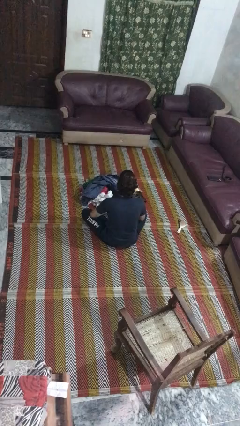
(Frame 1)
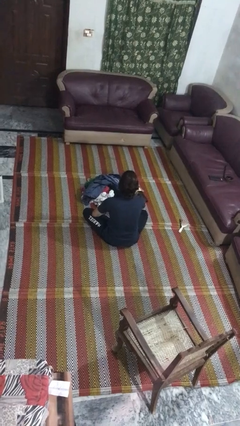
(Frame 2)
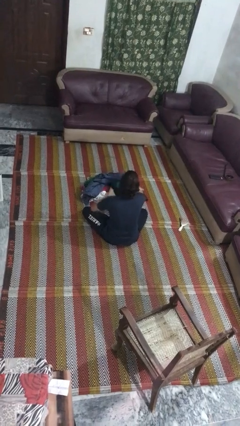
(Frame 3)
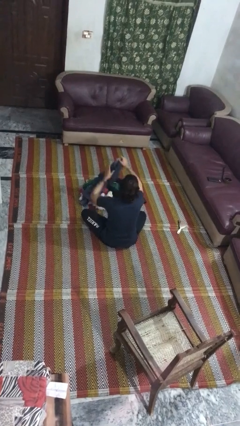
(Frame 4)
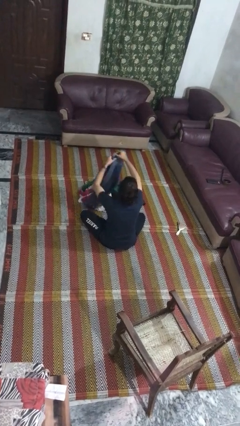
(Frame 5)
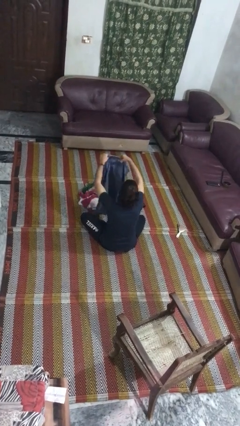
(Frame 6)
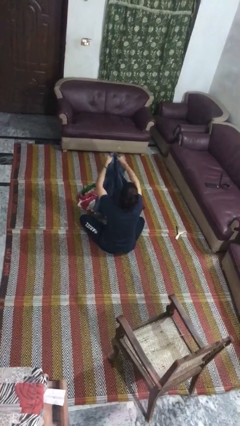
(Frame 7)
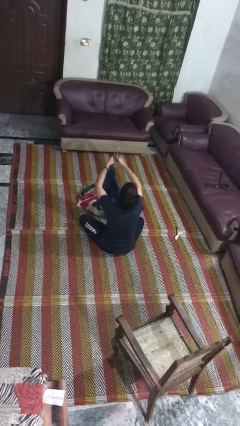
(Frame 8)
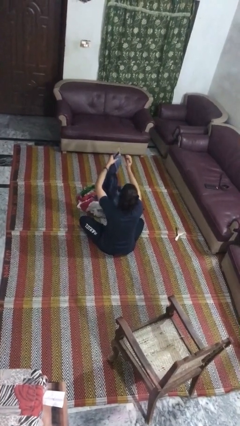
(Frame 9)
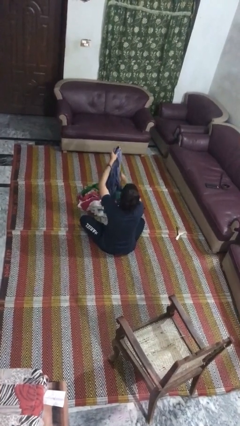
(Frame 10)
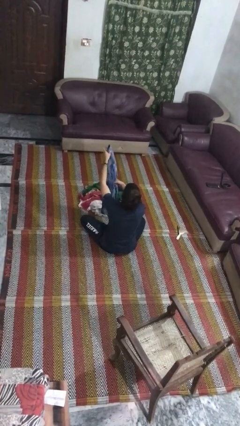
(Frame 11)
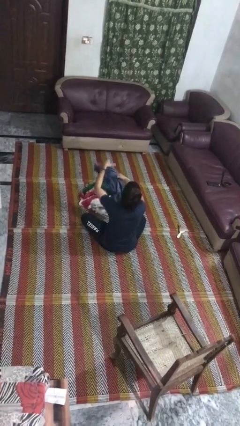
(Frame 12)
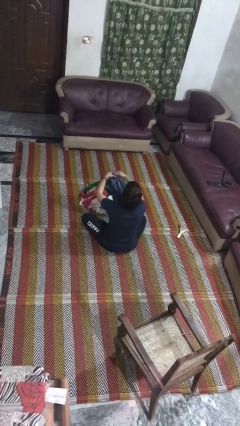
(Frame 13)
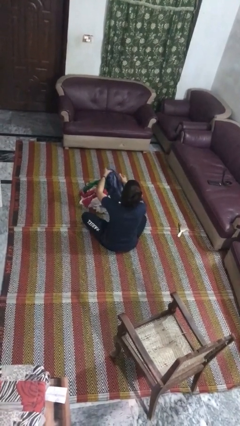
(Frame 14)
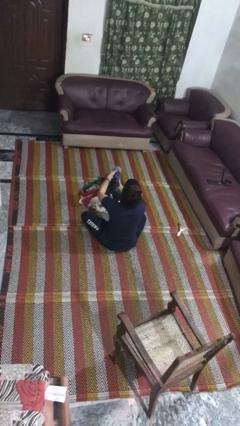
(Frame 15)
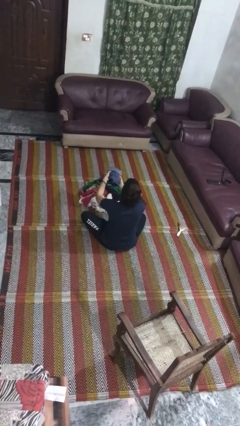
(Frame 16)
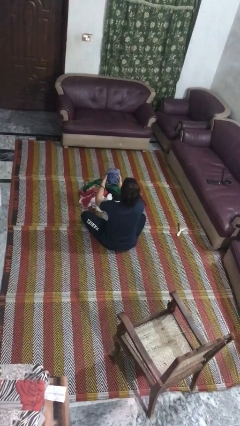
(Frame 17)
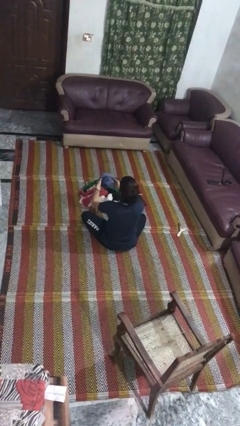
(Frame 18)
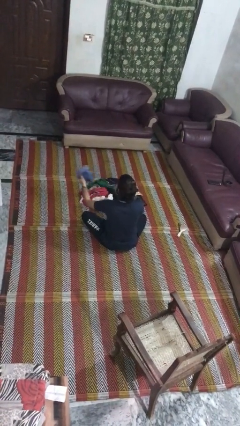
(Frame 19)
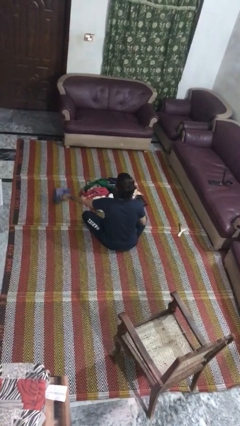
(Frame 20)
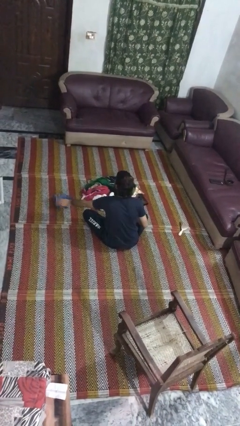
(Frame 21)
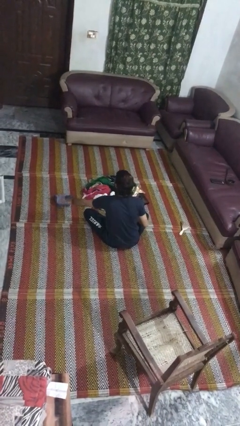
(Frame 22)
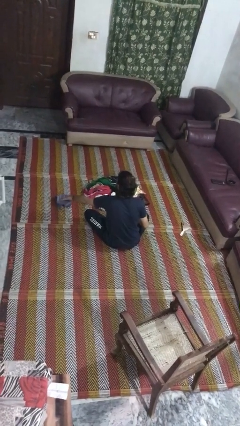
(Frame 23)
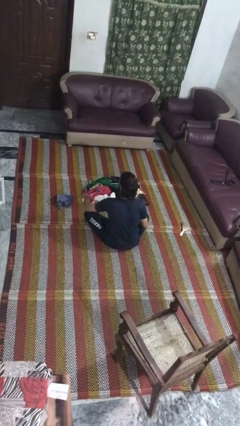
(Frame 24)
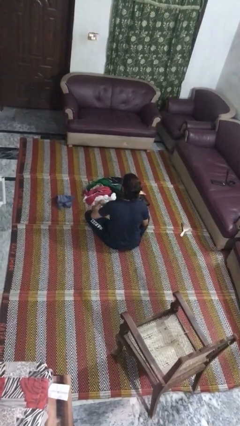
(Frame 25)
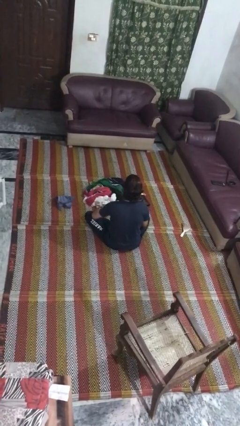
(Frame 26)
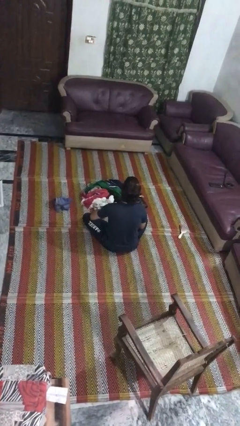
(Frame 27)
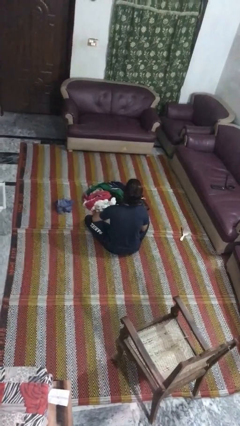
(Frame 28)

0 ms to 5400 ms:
person folds shirt

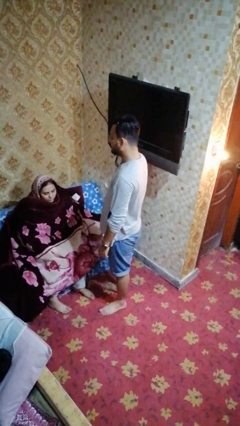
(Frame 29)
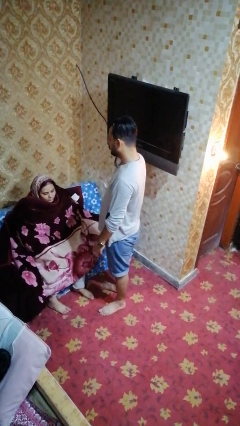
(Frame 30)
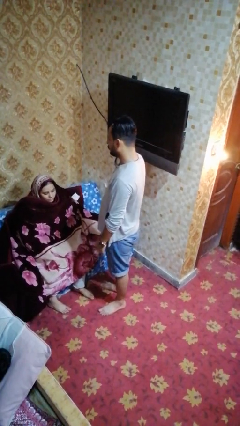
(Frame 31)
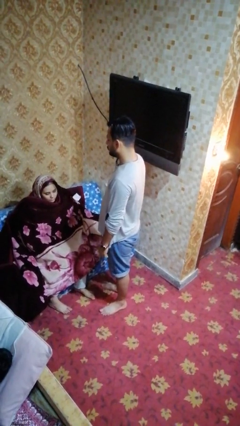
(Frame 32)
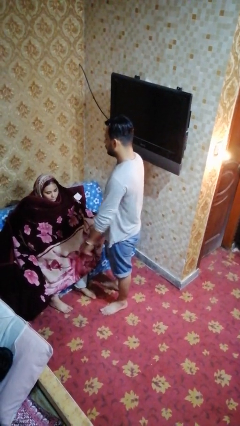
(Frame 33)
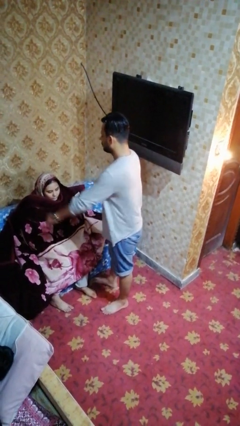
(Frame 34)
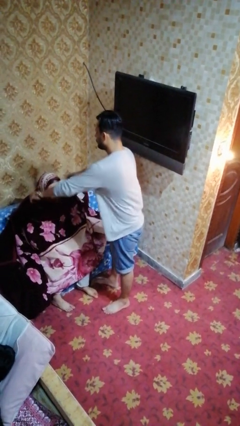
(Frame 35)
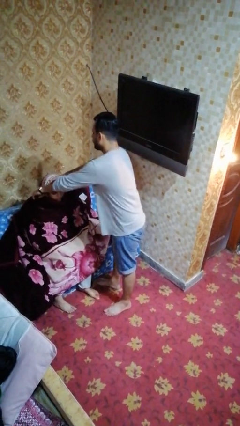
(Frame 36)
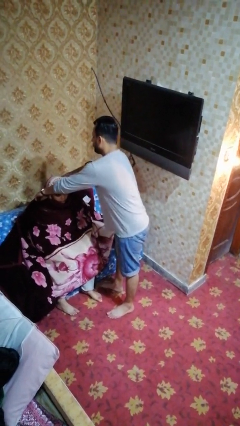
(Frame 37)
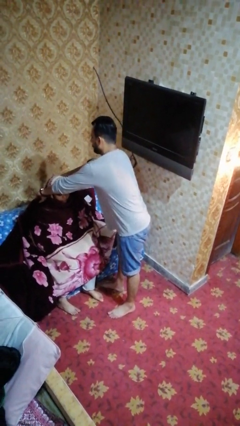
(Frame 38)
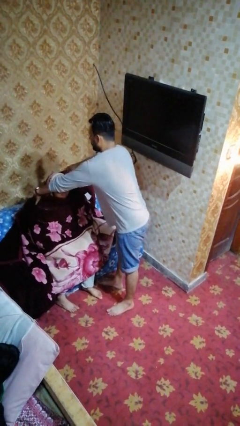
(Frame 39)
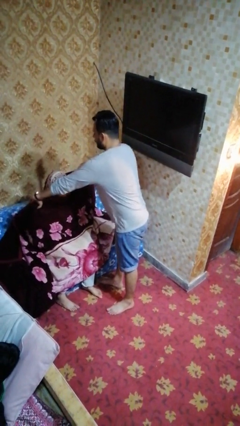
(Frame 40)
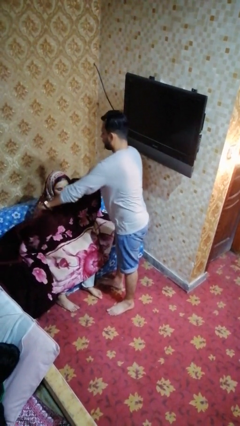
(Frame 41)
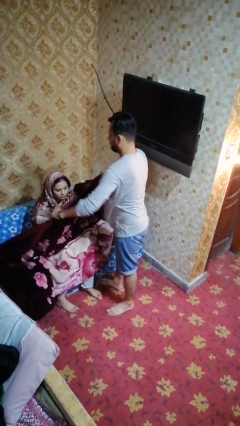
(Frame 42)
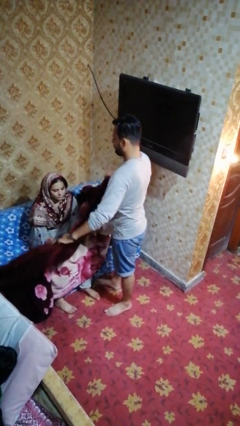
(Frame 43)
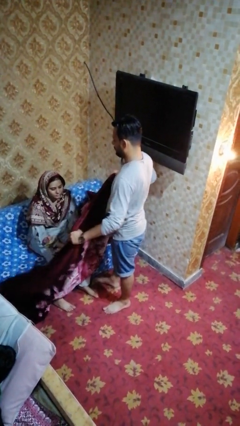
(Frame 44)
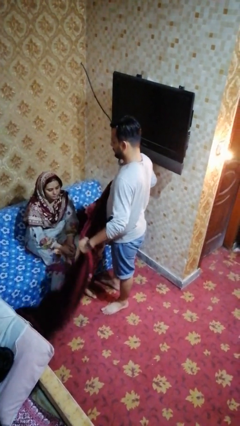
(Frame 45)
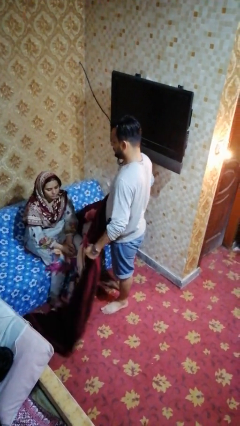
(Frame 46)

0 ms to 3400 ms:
person uncovers friend with blanket

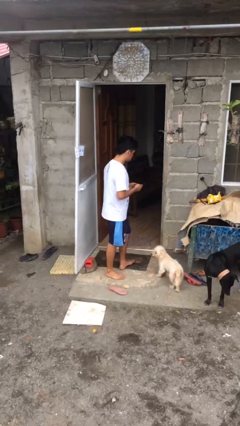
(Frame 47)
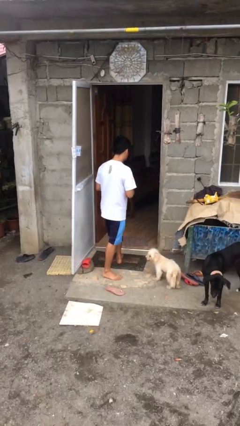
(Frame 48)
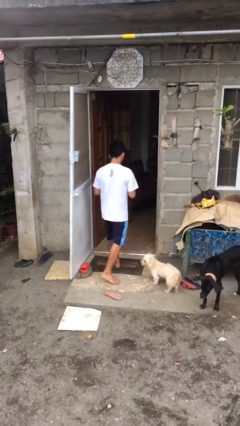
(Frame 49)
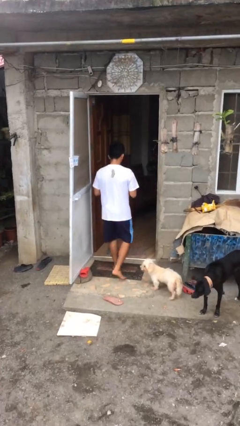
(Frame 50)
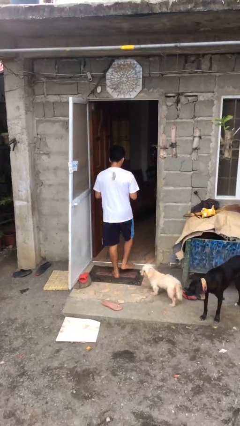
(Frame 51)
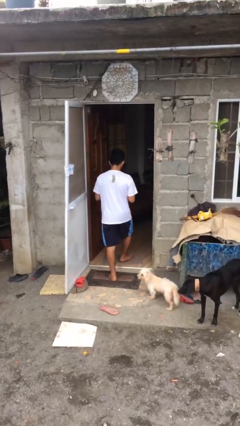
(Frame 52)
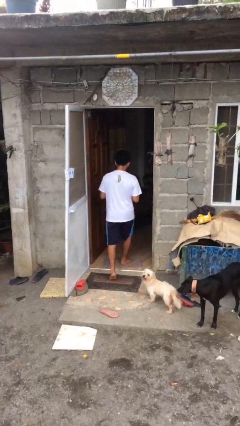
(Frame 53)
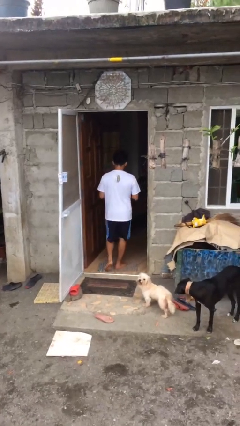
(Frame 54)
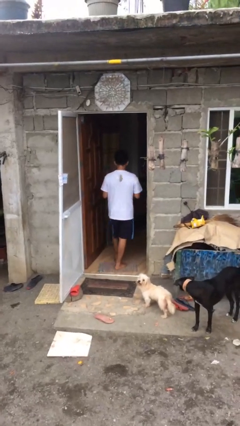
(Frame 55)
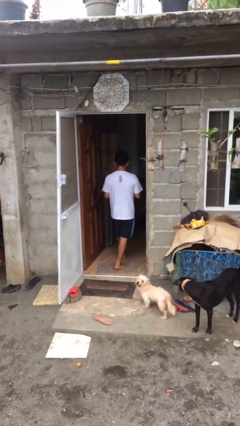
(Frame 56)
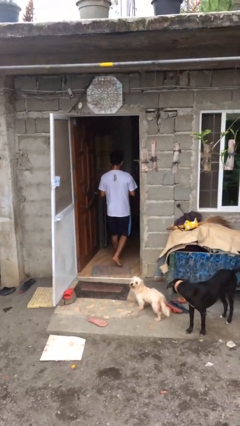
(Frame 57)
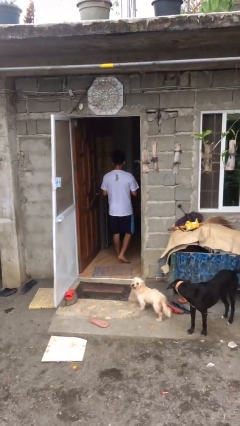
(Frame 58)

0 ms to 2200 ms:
person exits scene through structure

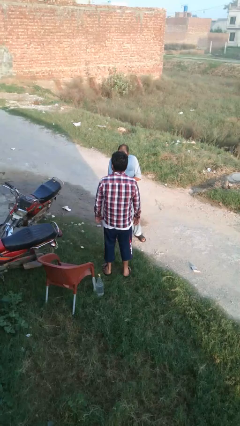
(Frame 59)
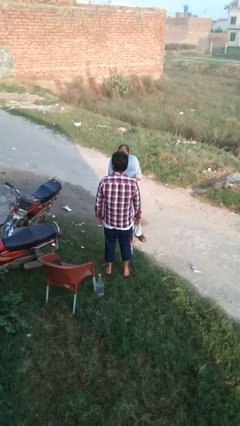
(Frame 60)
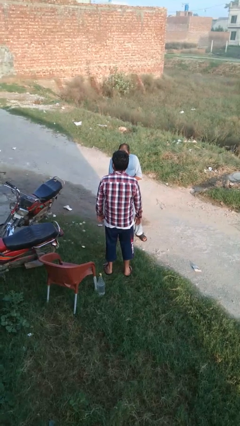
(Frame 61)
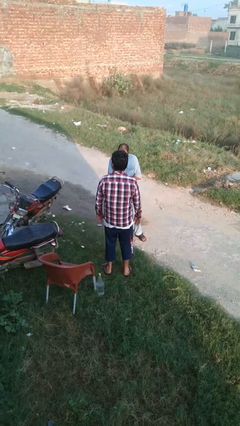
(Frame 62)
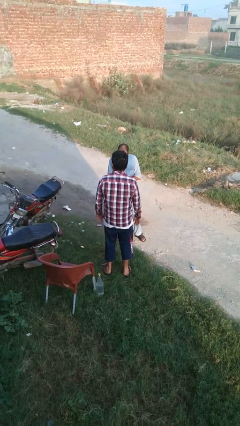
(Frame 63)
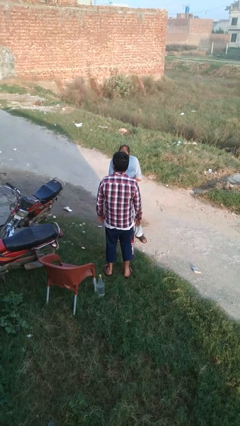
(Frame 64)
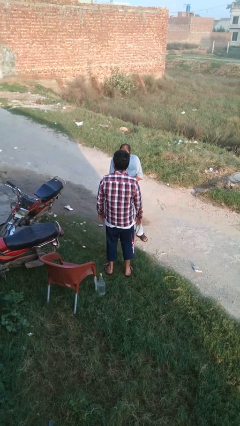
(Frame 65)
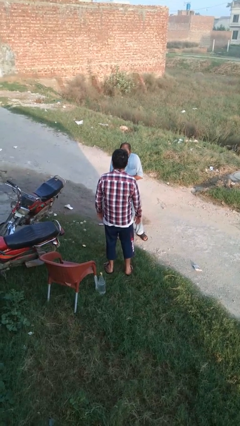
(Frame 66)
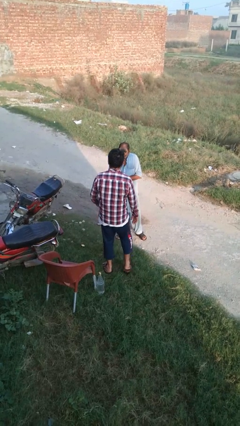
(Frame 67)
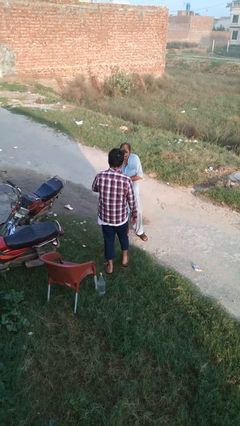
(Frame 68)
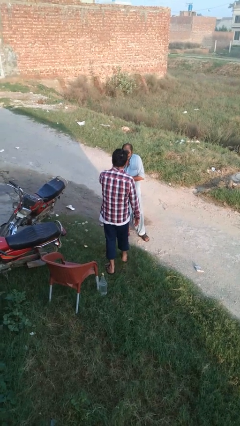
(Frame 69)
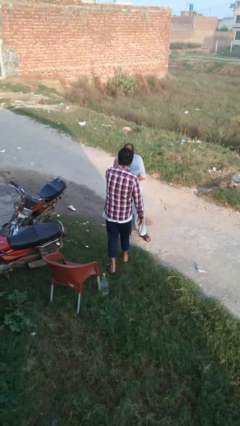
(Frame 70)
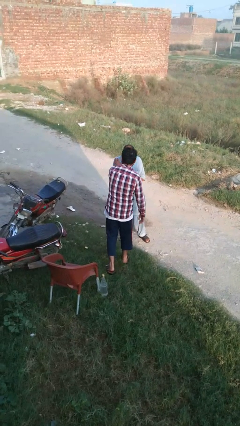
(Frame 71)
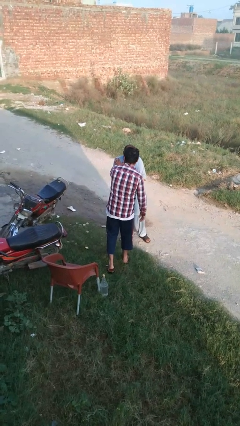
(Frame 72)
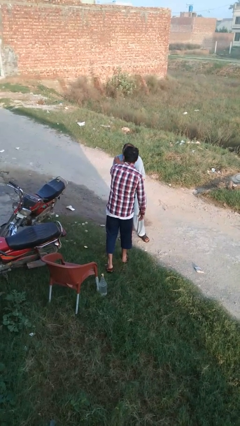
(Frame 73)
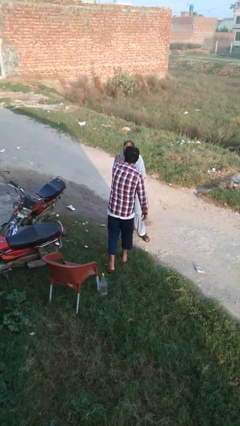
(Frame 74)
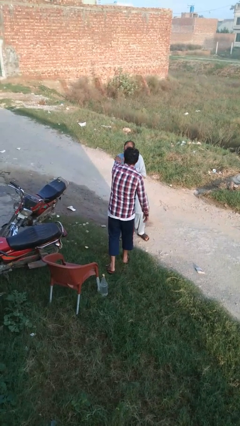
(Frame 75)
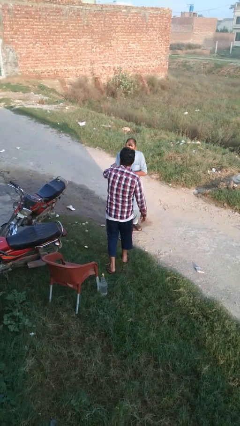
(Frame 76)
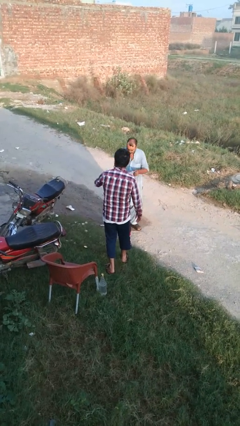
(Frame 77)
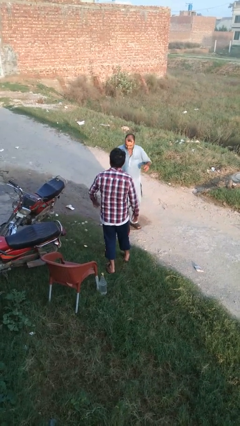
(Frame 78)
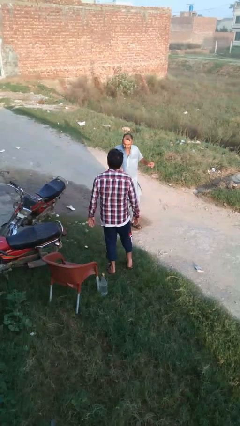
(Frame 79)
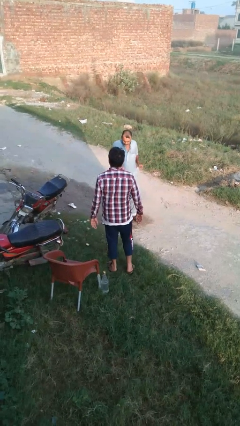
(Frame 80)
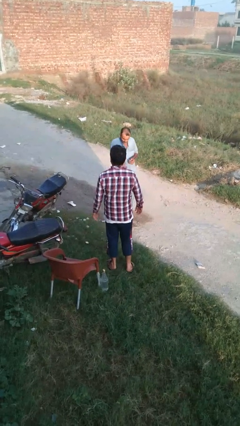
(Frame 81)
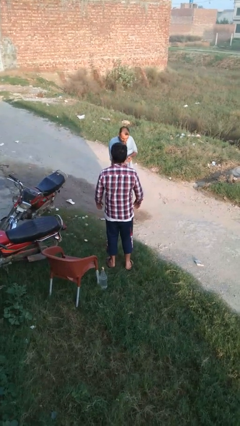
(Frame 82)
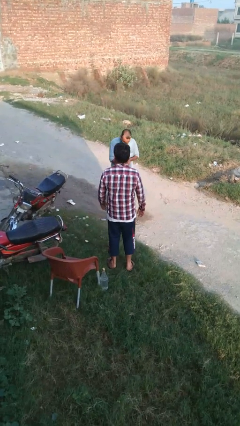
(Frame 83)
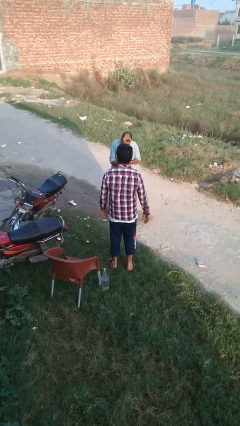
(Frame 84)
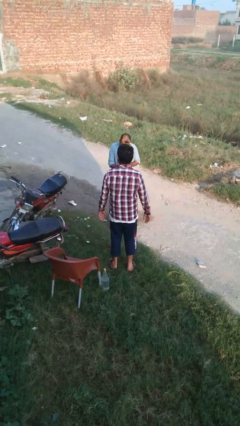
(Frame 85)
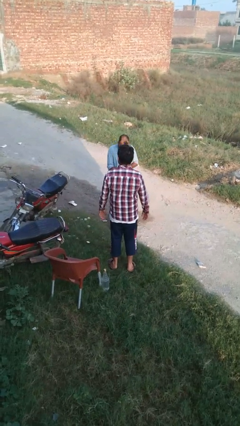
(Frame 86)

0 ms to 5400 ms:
person shoves person

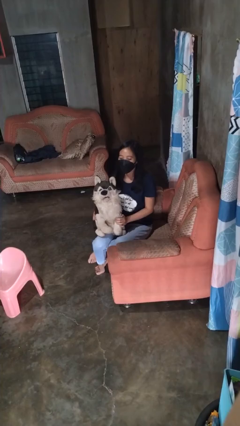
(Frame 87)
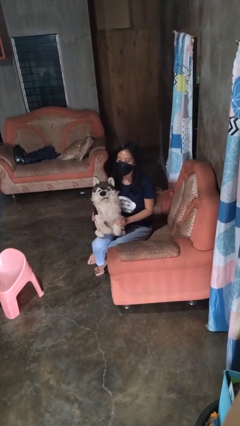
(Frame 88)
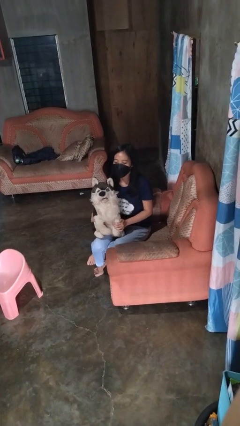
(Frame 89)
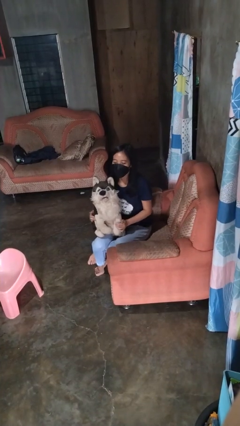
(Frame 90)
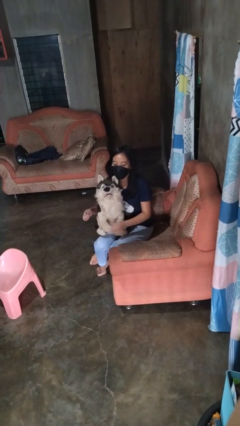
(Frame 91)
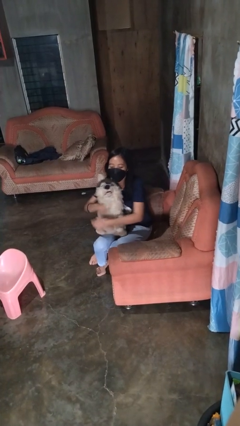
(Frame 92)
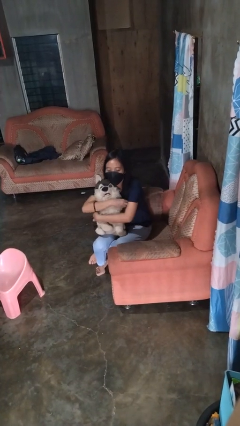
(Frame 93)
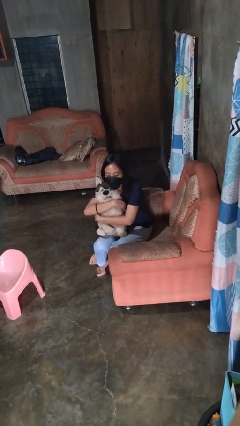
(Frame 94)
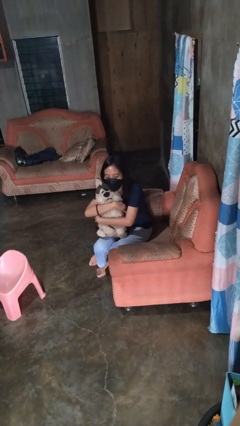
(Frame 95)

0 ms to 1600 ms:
person hugs stuffed animal
